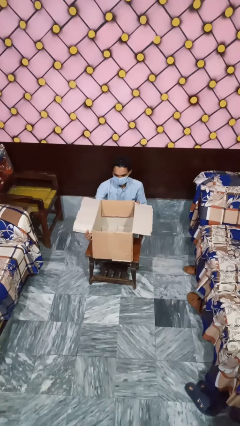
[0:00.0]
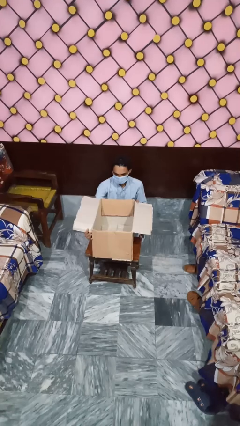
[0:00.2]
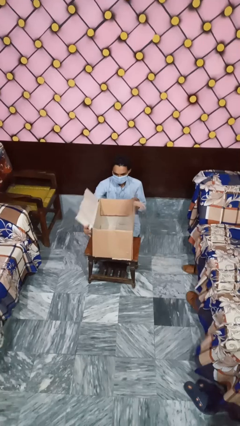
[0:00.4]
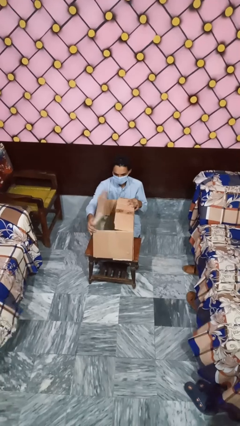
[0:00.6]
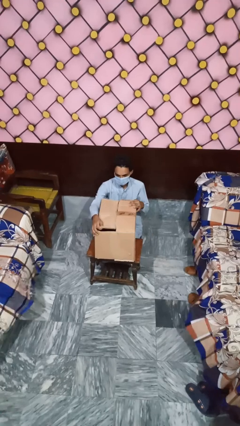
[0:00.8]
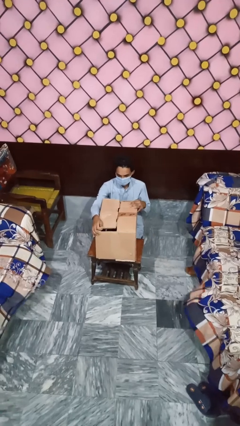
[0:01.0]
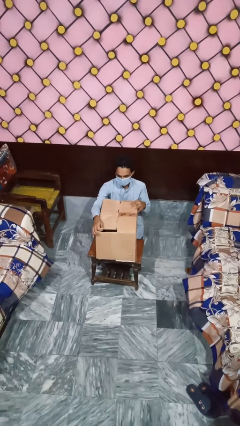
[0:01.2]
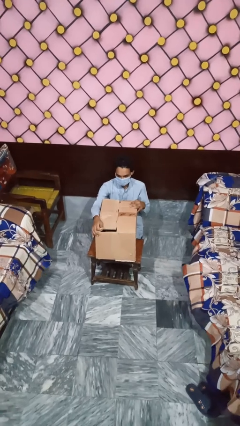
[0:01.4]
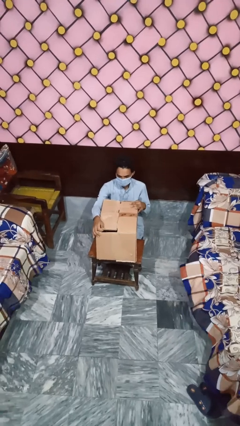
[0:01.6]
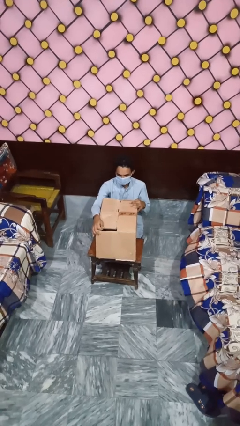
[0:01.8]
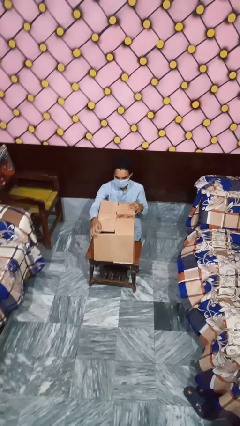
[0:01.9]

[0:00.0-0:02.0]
person closes box

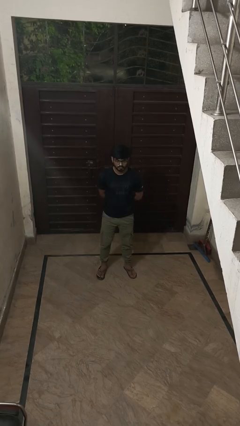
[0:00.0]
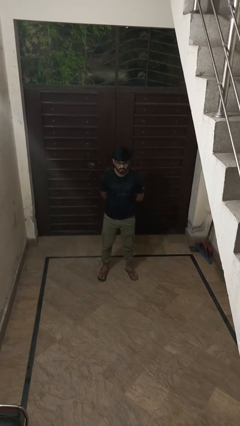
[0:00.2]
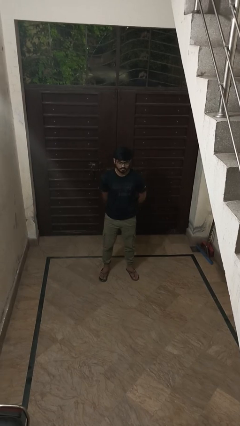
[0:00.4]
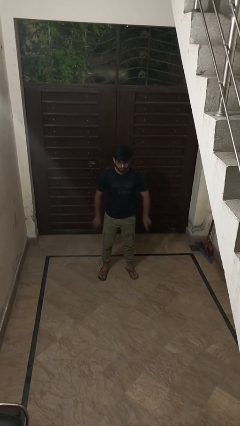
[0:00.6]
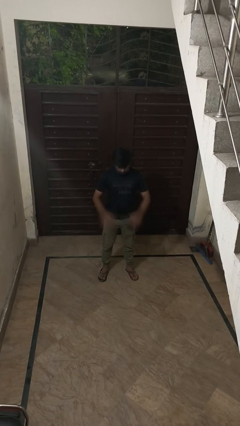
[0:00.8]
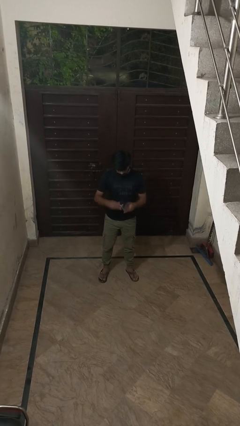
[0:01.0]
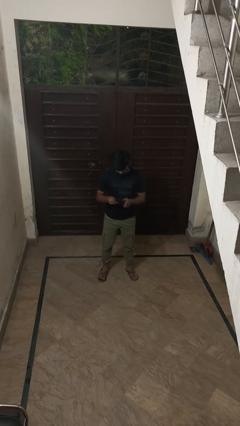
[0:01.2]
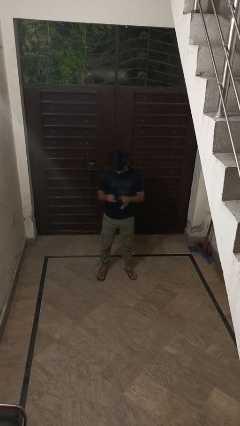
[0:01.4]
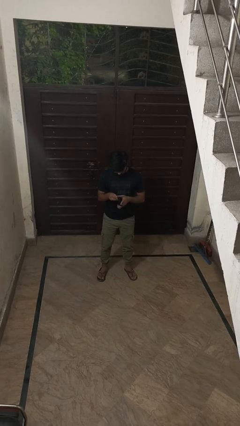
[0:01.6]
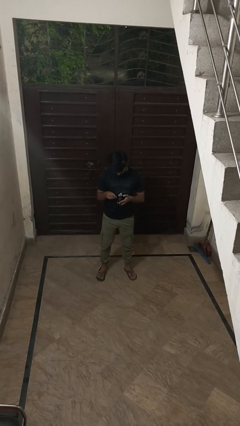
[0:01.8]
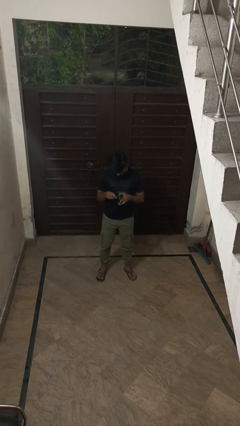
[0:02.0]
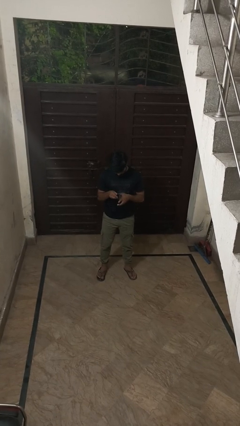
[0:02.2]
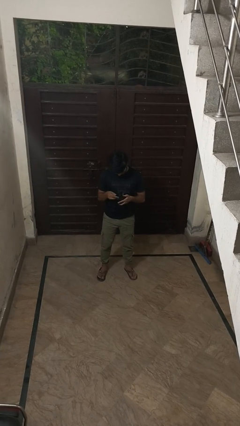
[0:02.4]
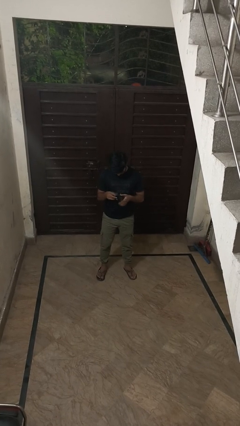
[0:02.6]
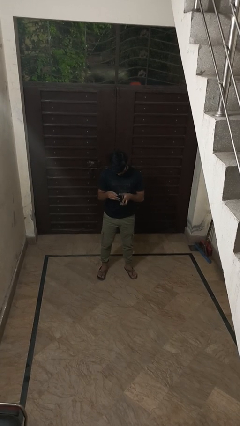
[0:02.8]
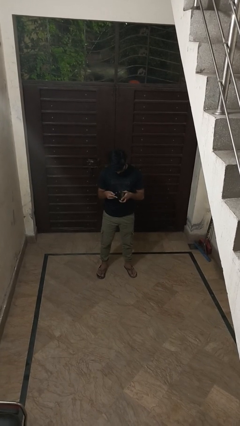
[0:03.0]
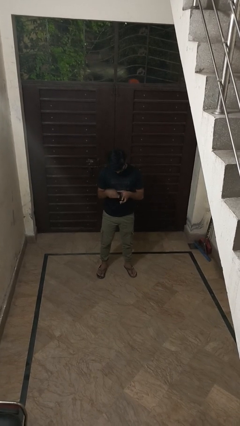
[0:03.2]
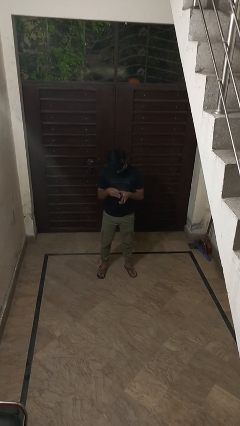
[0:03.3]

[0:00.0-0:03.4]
person searches in purse

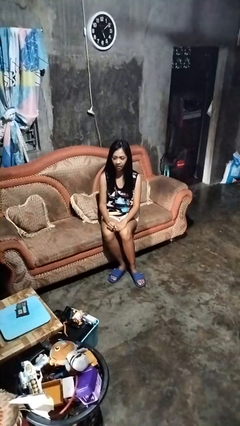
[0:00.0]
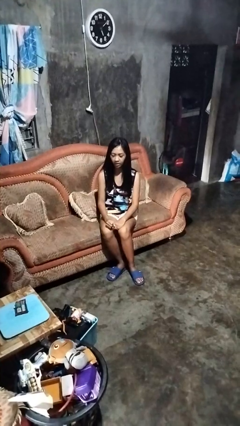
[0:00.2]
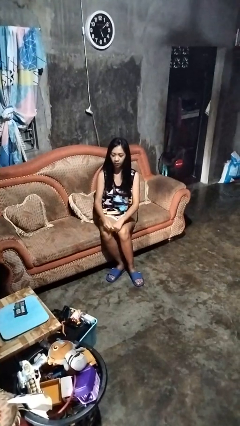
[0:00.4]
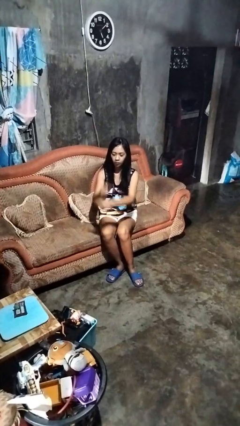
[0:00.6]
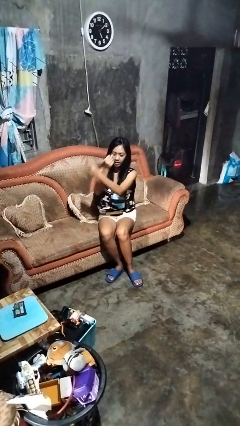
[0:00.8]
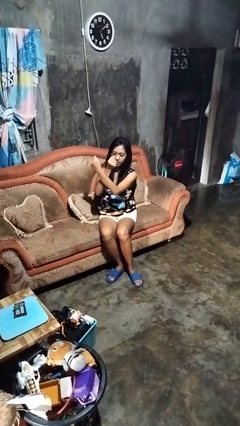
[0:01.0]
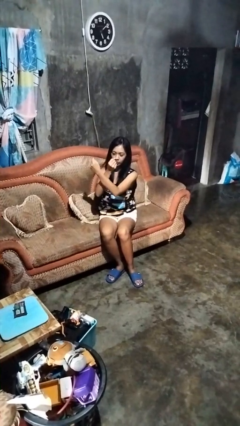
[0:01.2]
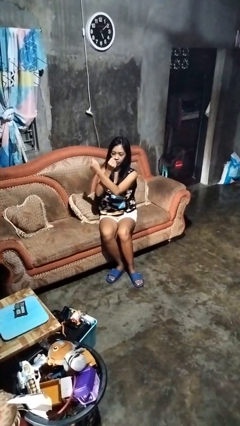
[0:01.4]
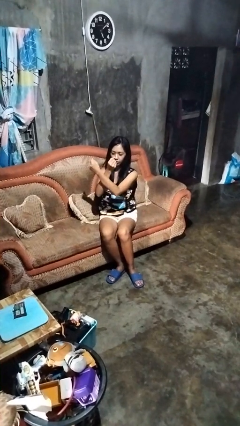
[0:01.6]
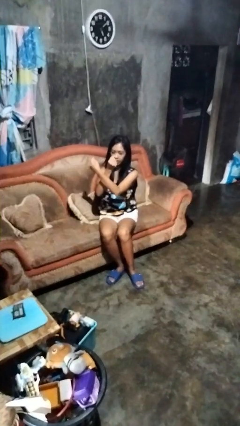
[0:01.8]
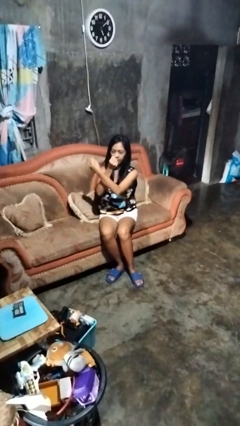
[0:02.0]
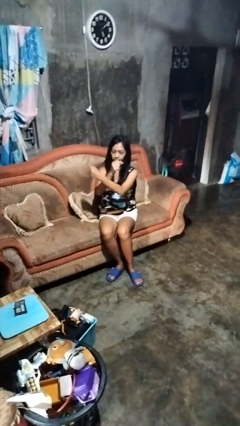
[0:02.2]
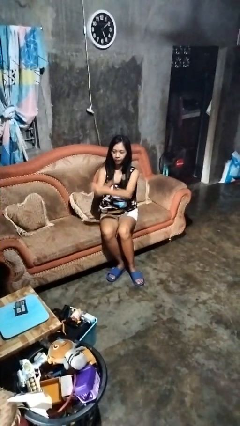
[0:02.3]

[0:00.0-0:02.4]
person gestures arms x

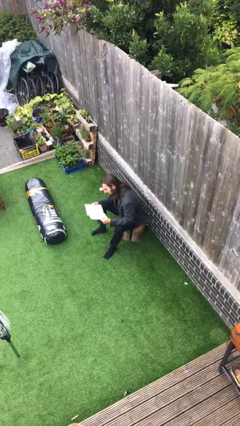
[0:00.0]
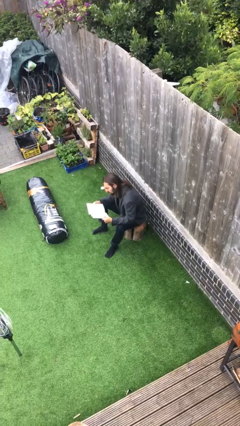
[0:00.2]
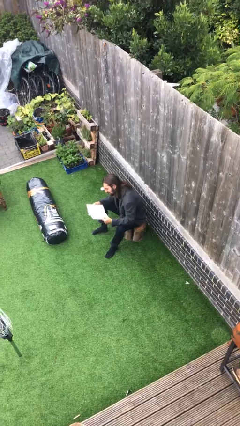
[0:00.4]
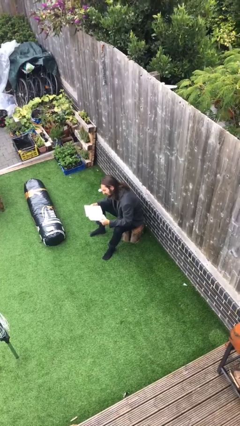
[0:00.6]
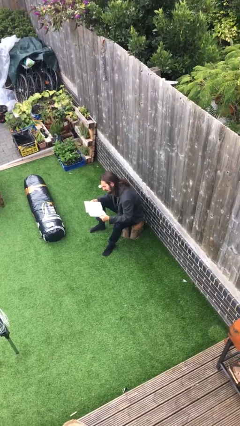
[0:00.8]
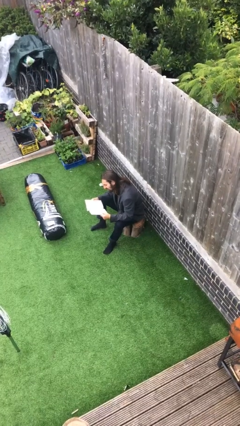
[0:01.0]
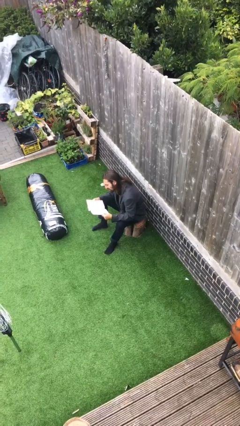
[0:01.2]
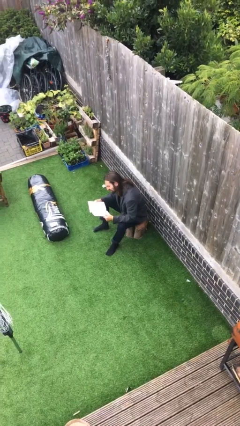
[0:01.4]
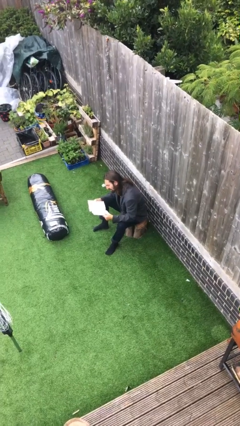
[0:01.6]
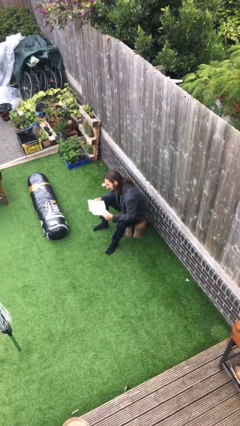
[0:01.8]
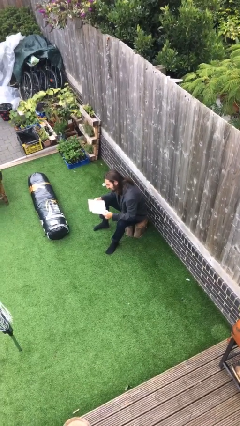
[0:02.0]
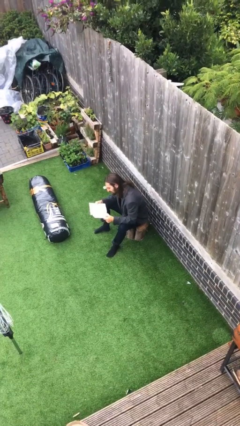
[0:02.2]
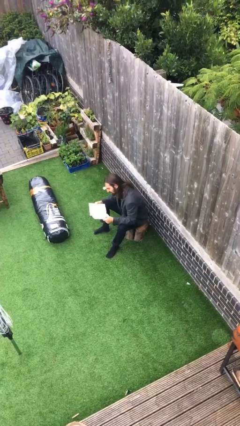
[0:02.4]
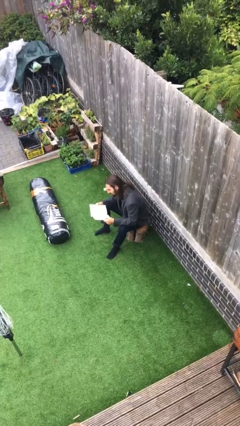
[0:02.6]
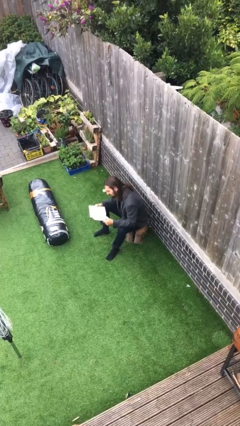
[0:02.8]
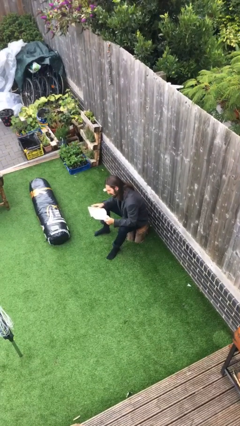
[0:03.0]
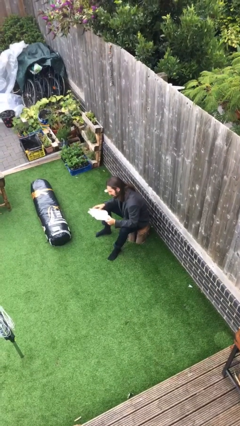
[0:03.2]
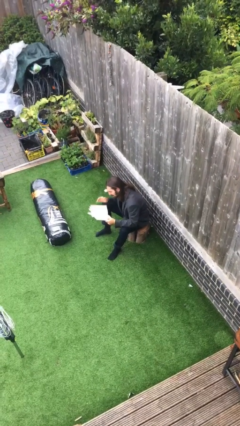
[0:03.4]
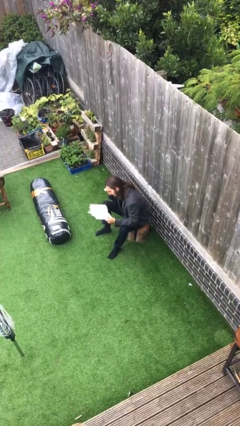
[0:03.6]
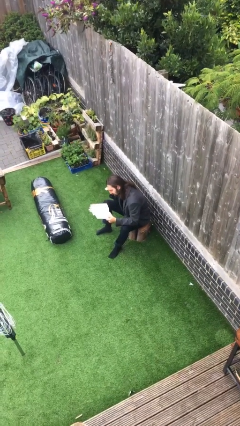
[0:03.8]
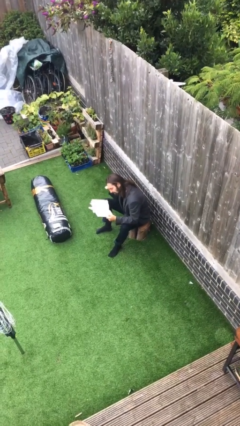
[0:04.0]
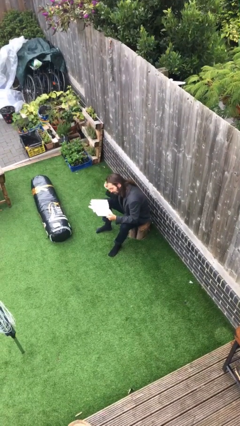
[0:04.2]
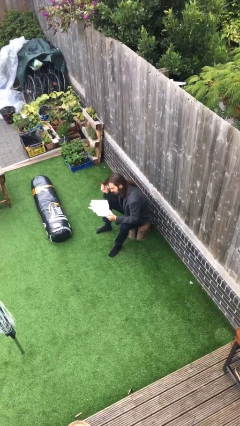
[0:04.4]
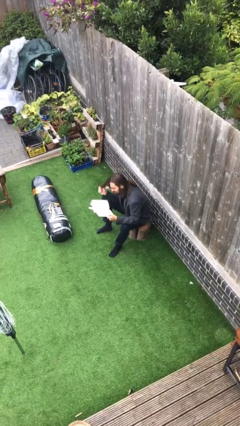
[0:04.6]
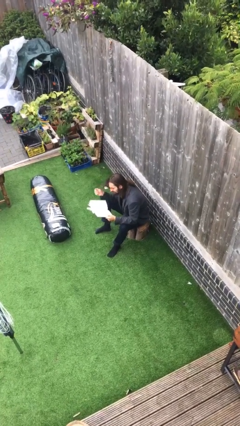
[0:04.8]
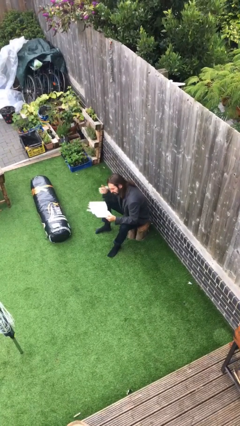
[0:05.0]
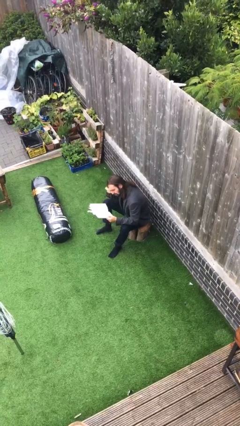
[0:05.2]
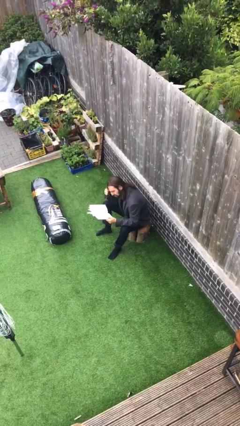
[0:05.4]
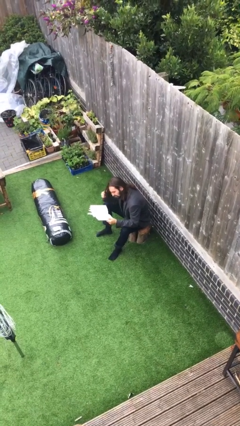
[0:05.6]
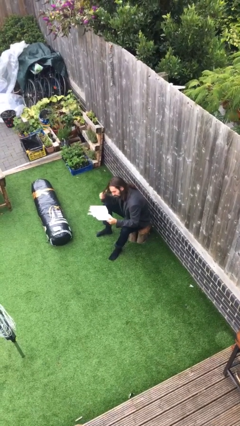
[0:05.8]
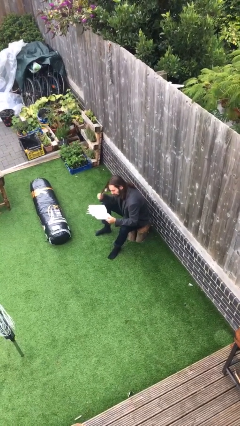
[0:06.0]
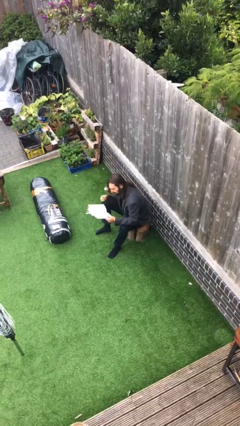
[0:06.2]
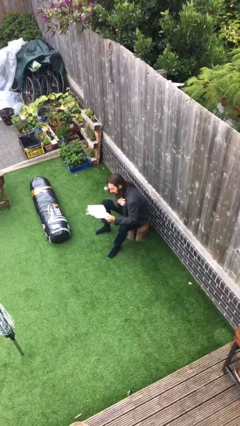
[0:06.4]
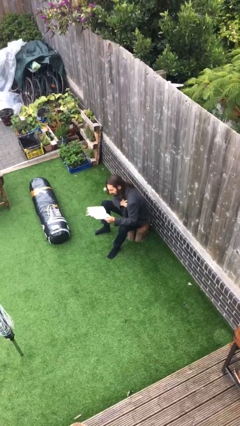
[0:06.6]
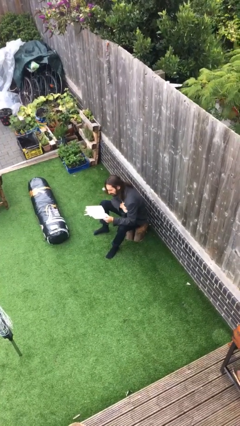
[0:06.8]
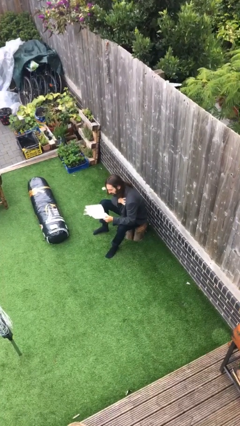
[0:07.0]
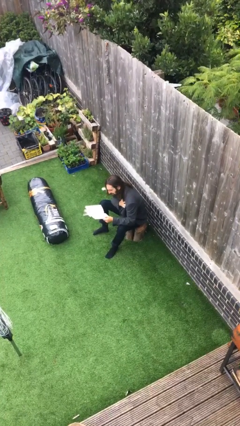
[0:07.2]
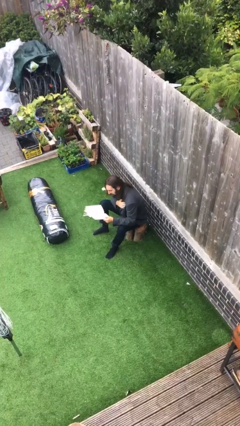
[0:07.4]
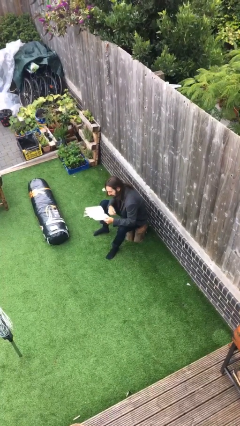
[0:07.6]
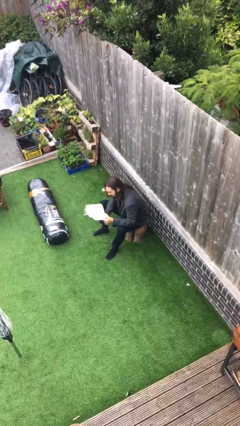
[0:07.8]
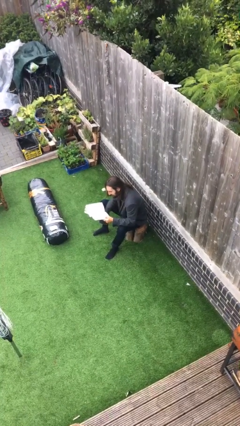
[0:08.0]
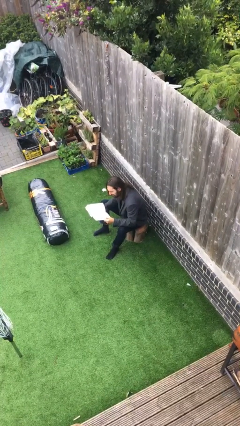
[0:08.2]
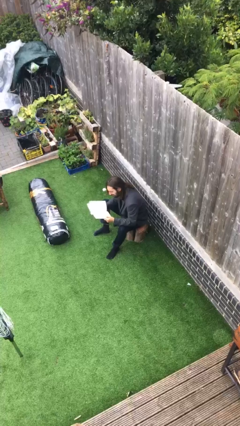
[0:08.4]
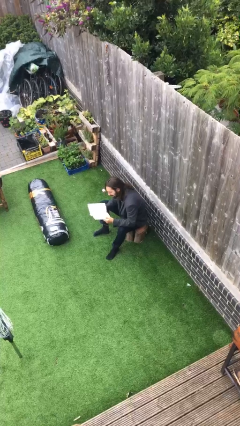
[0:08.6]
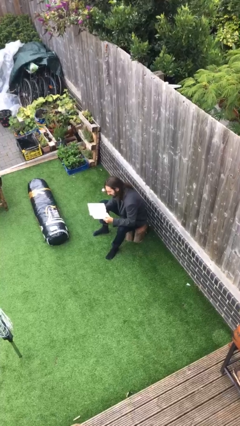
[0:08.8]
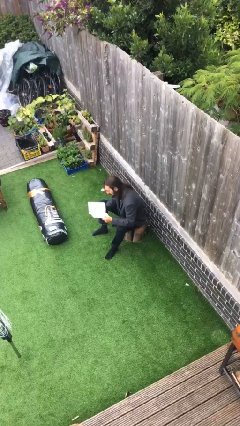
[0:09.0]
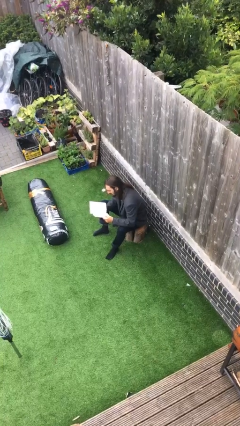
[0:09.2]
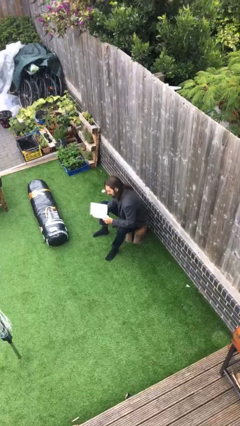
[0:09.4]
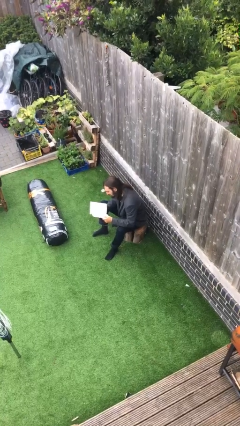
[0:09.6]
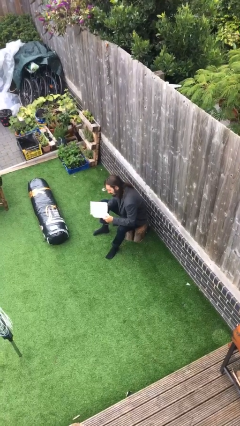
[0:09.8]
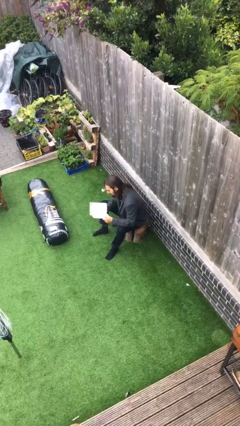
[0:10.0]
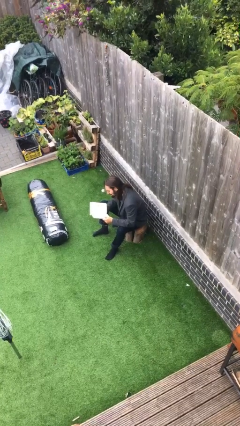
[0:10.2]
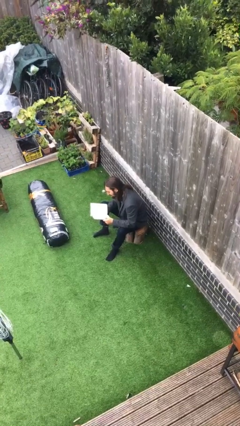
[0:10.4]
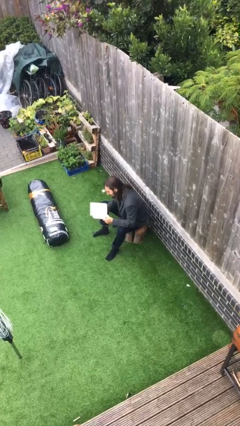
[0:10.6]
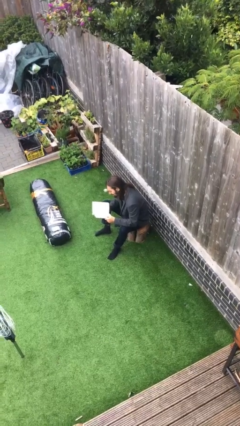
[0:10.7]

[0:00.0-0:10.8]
person reads document
